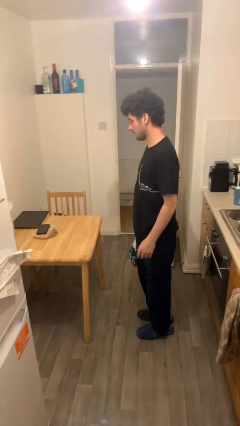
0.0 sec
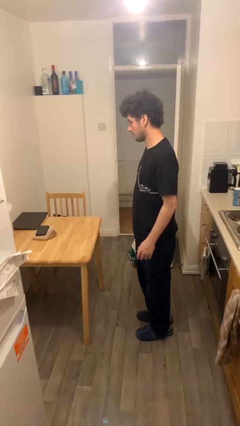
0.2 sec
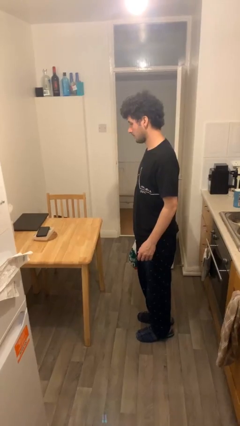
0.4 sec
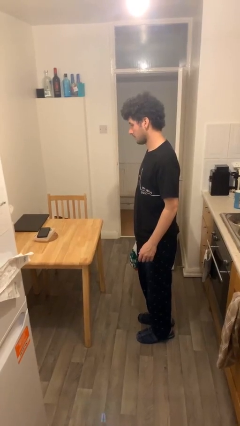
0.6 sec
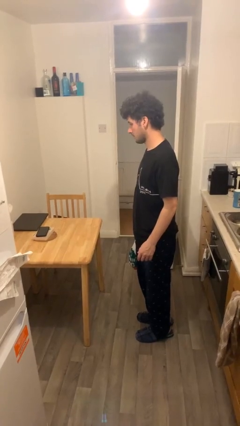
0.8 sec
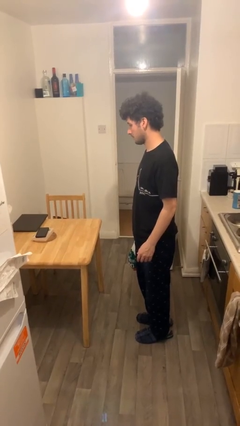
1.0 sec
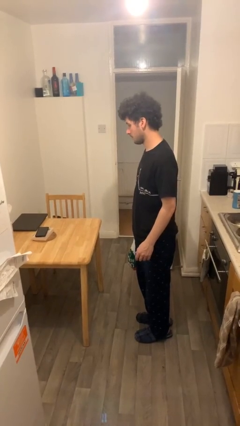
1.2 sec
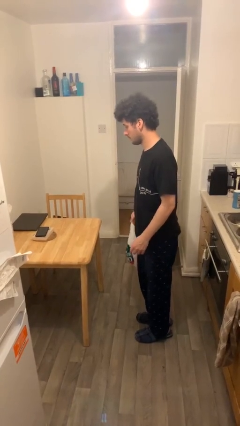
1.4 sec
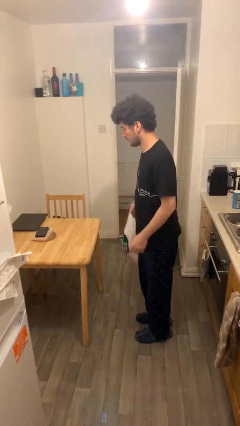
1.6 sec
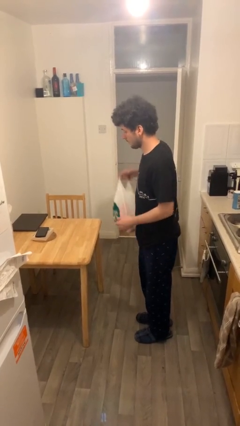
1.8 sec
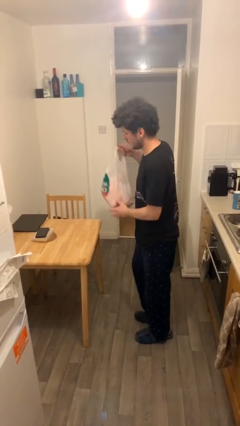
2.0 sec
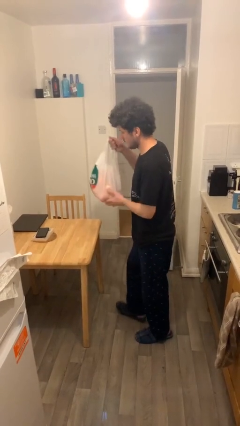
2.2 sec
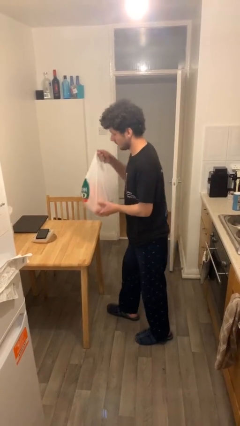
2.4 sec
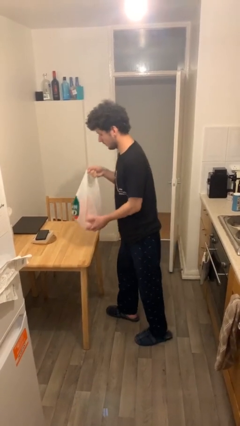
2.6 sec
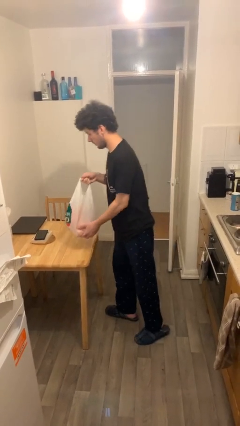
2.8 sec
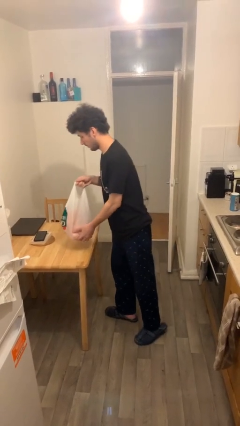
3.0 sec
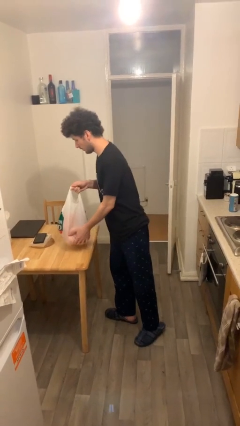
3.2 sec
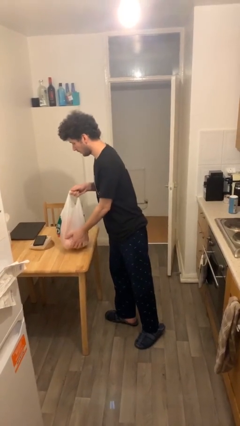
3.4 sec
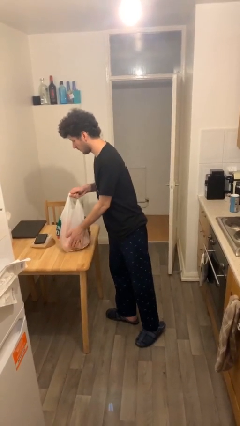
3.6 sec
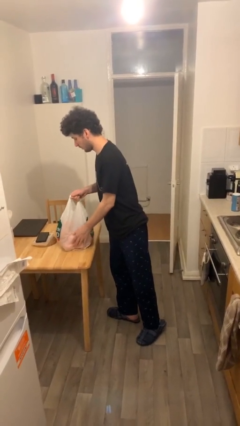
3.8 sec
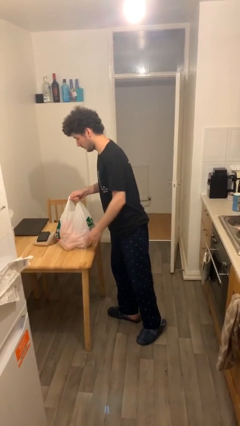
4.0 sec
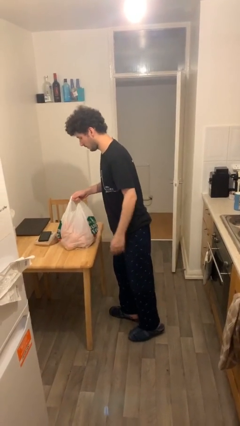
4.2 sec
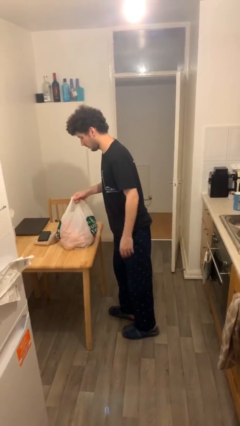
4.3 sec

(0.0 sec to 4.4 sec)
person puts down object on table

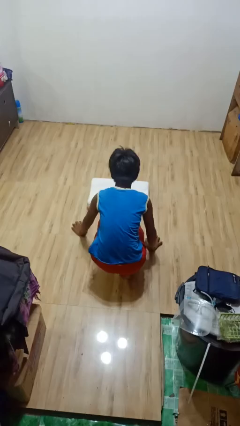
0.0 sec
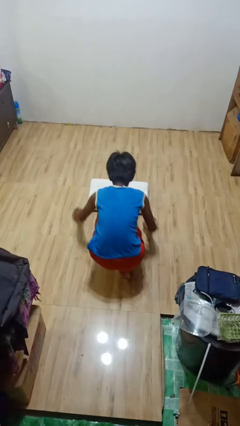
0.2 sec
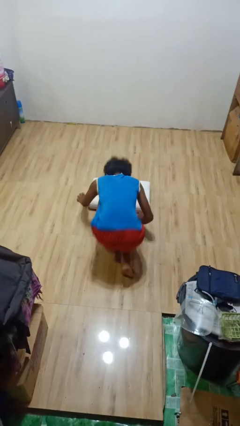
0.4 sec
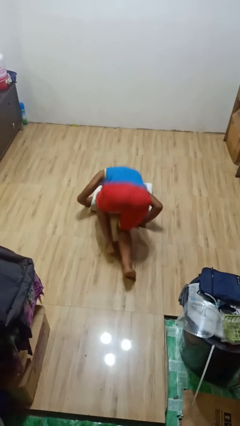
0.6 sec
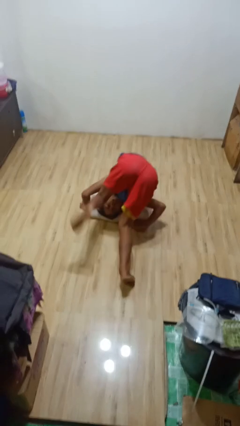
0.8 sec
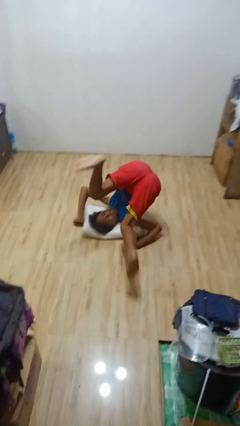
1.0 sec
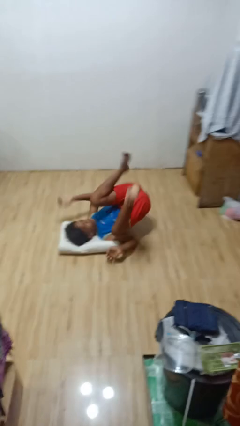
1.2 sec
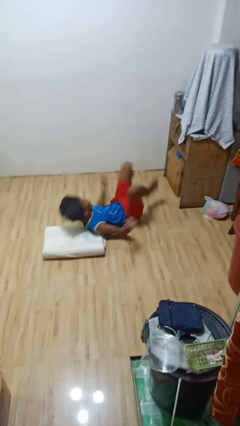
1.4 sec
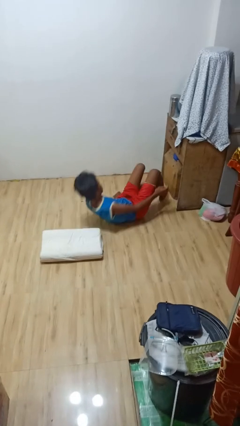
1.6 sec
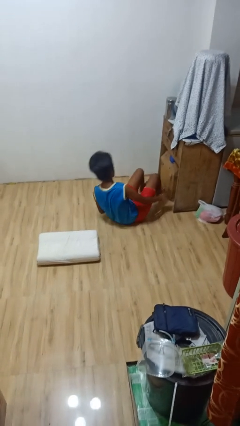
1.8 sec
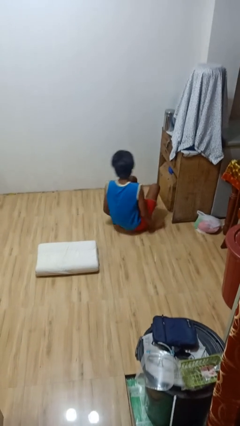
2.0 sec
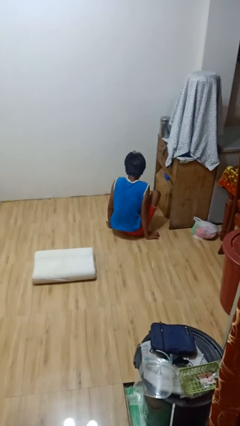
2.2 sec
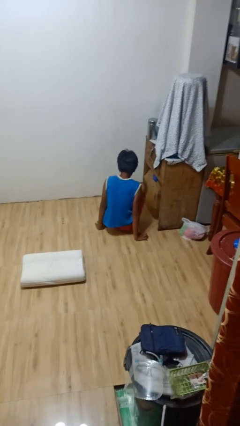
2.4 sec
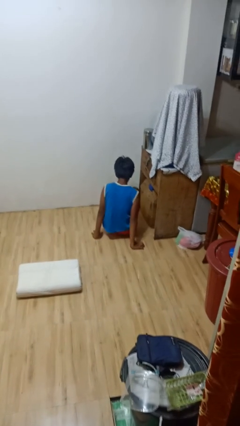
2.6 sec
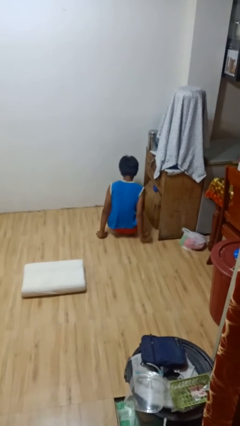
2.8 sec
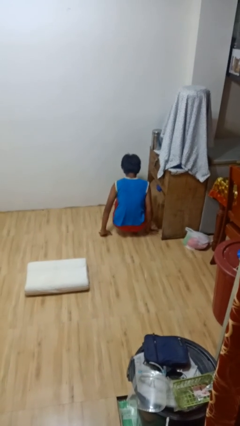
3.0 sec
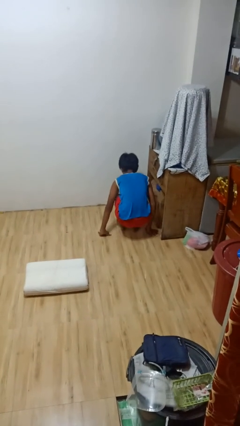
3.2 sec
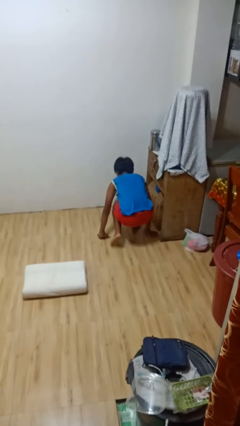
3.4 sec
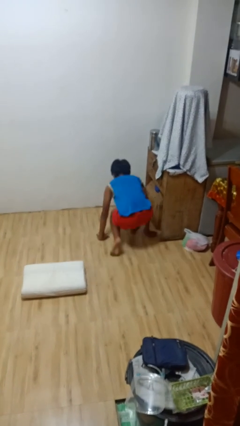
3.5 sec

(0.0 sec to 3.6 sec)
person somersaults

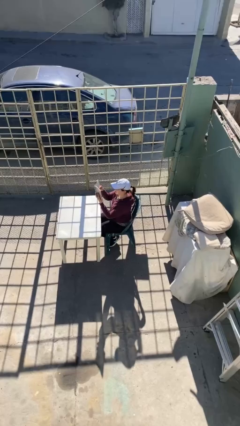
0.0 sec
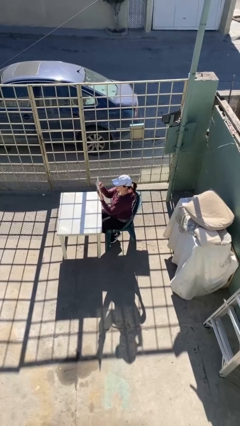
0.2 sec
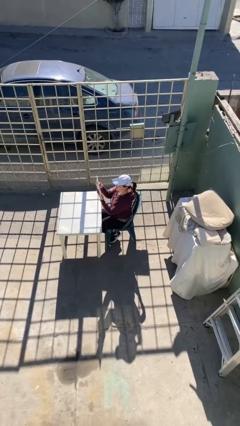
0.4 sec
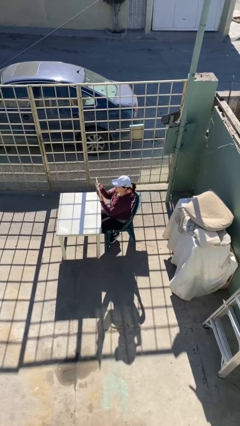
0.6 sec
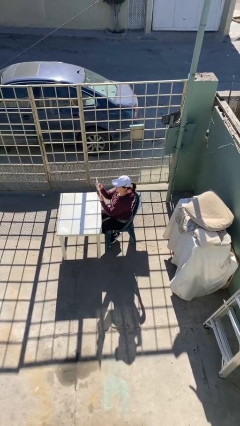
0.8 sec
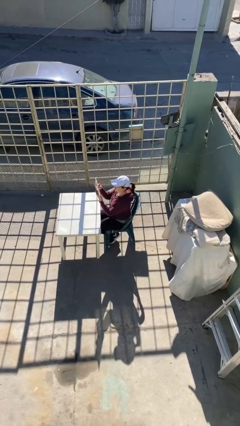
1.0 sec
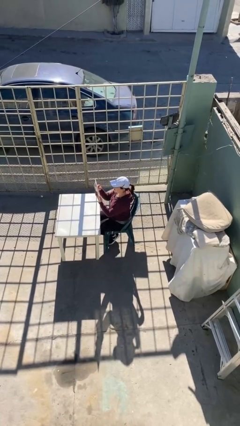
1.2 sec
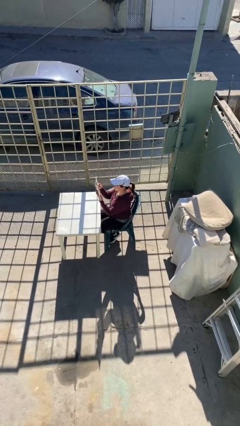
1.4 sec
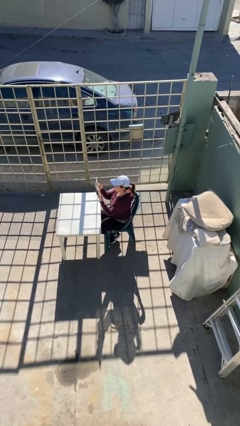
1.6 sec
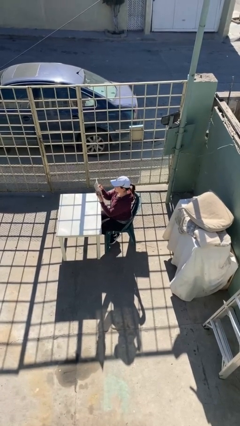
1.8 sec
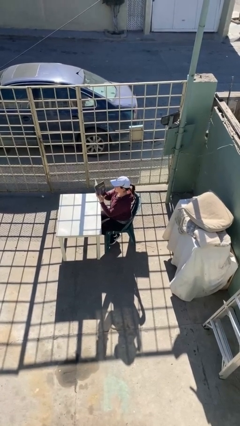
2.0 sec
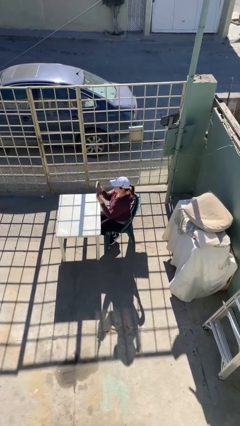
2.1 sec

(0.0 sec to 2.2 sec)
person reads document

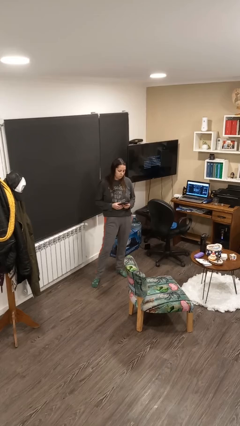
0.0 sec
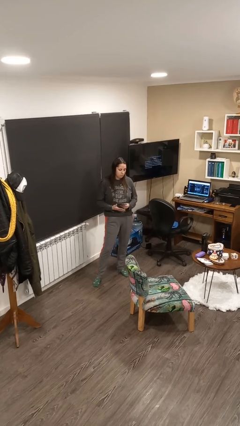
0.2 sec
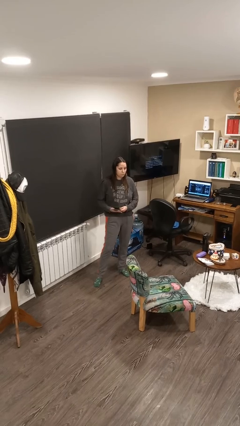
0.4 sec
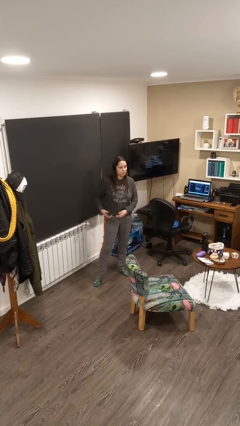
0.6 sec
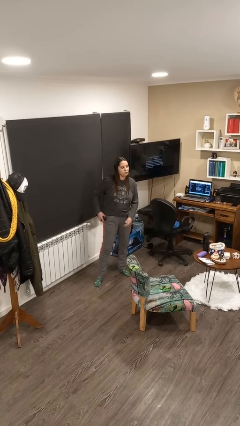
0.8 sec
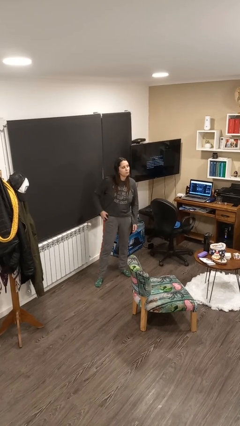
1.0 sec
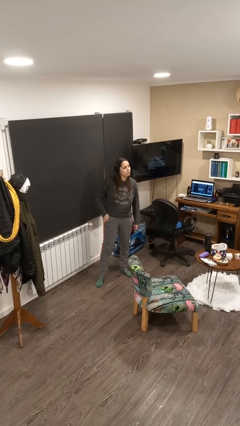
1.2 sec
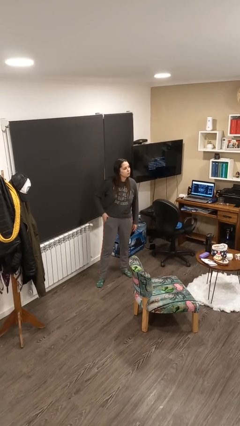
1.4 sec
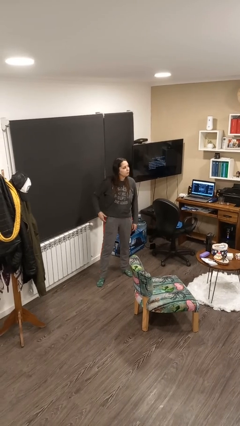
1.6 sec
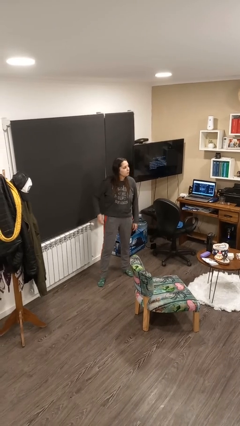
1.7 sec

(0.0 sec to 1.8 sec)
person puts phone into pocket

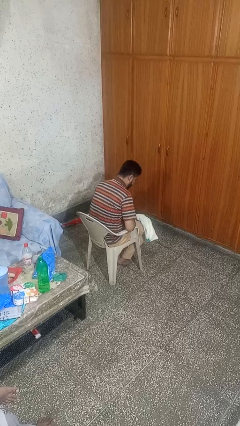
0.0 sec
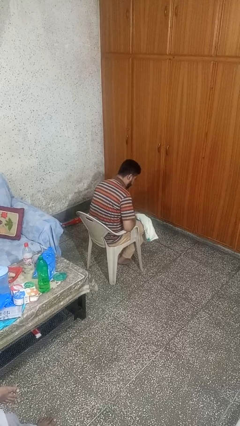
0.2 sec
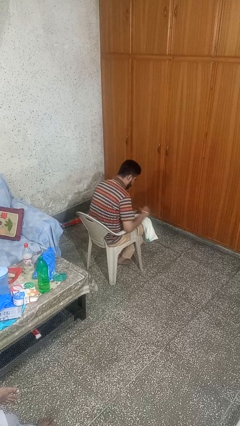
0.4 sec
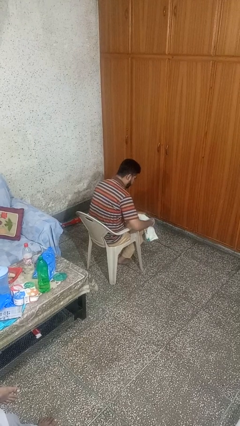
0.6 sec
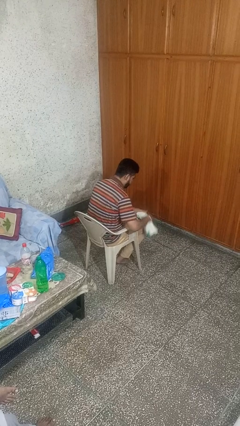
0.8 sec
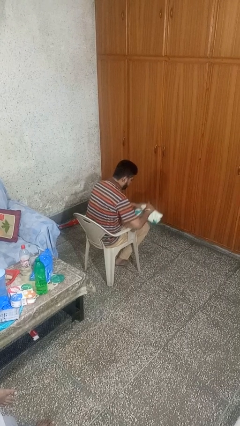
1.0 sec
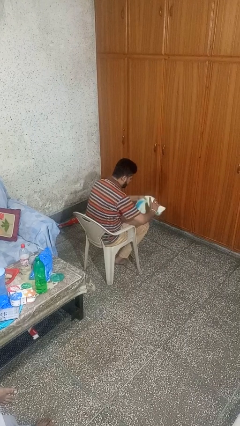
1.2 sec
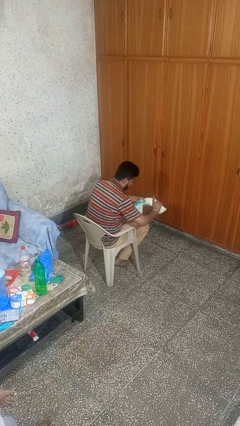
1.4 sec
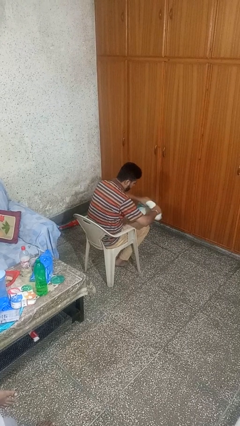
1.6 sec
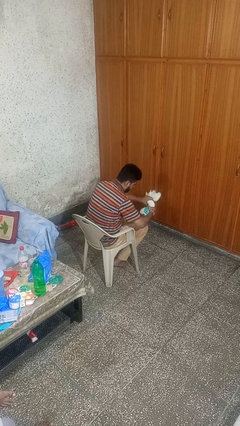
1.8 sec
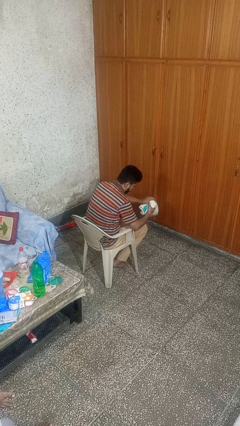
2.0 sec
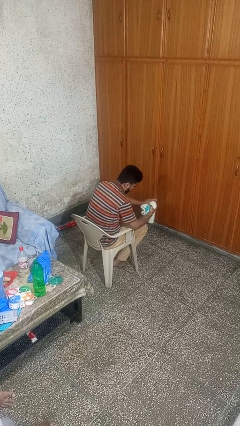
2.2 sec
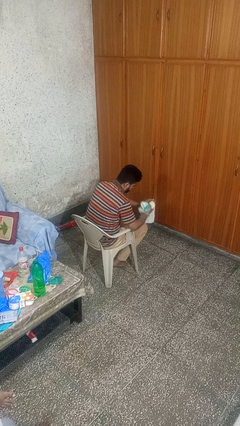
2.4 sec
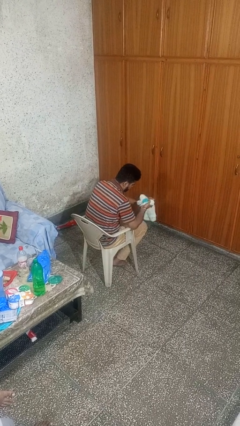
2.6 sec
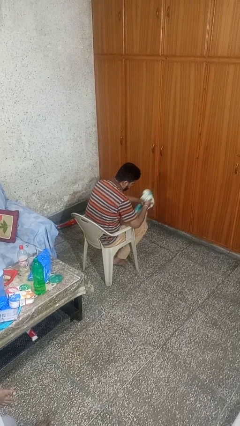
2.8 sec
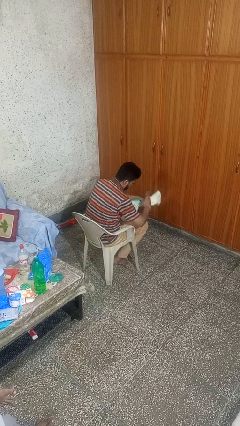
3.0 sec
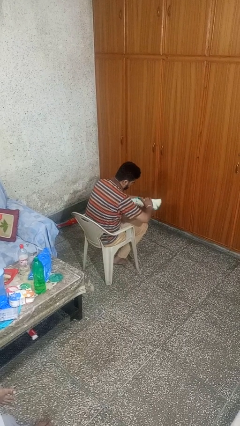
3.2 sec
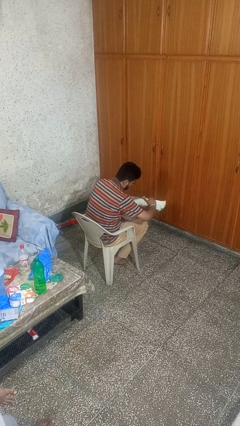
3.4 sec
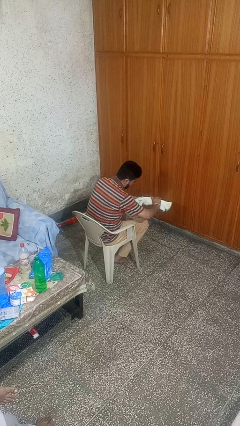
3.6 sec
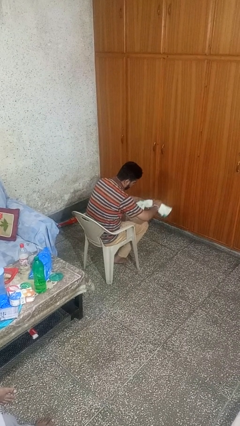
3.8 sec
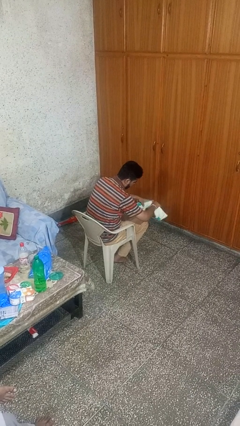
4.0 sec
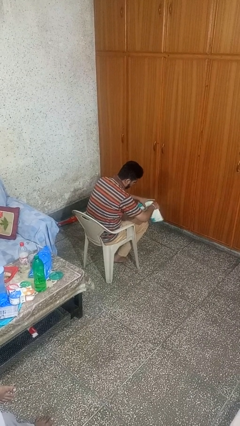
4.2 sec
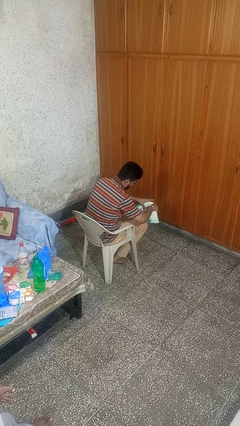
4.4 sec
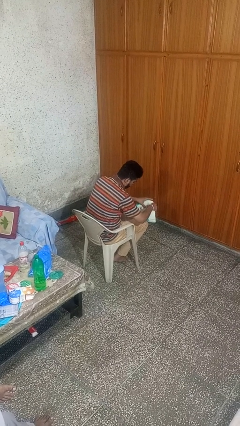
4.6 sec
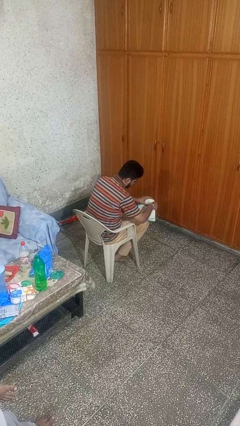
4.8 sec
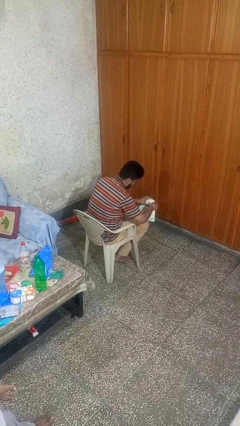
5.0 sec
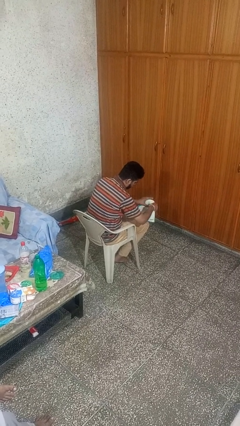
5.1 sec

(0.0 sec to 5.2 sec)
person squeezes object

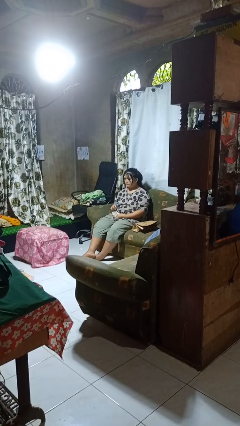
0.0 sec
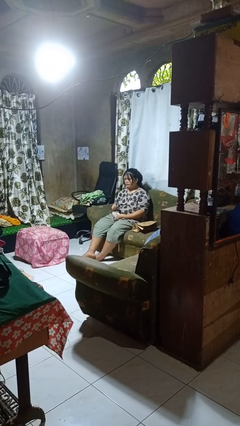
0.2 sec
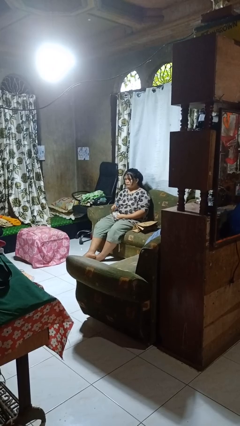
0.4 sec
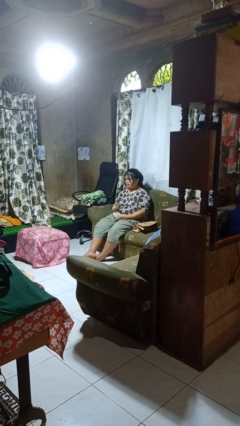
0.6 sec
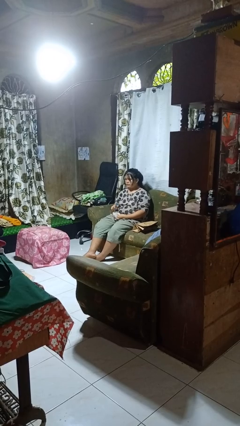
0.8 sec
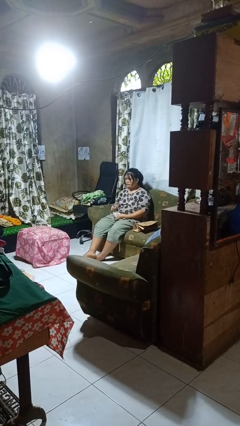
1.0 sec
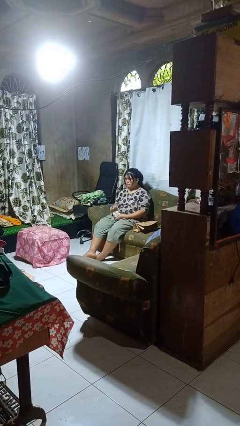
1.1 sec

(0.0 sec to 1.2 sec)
person stirs mug
